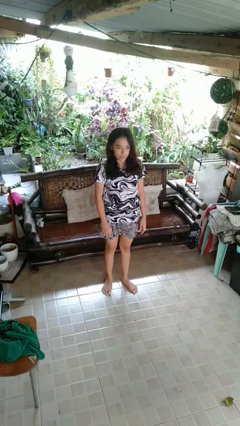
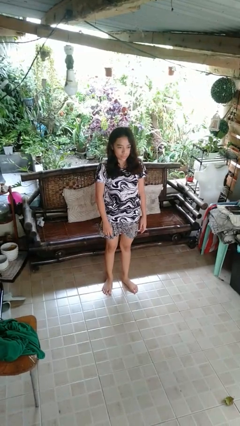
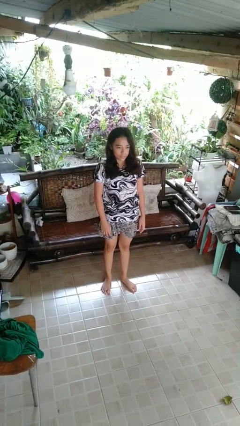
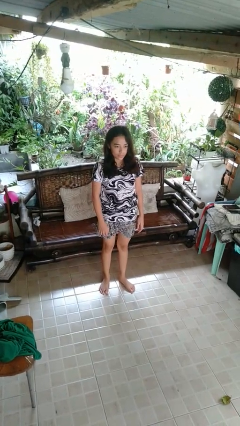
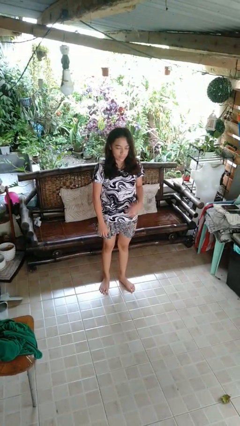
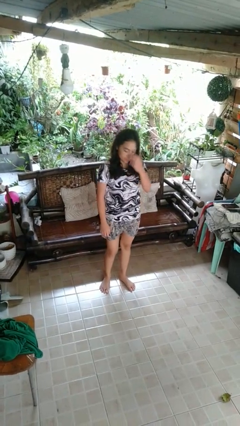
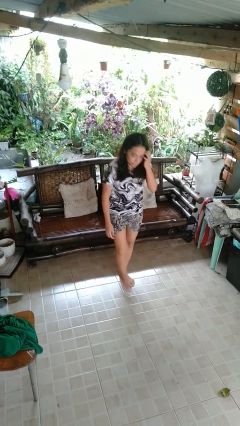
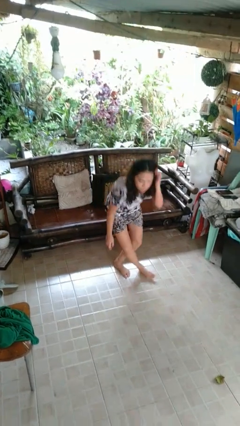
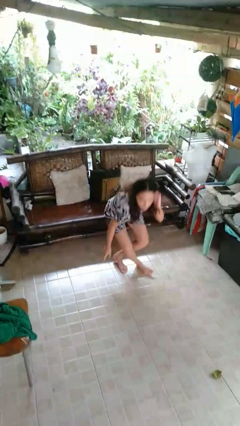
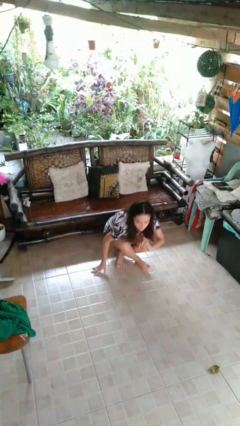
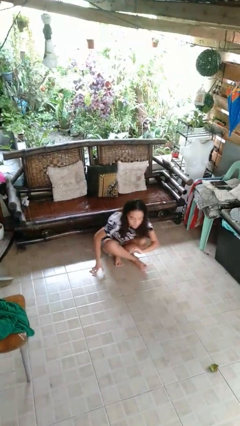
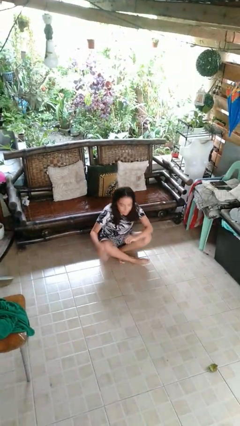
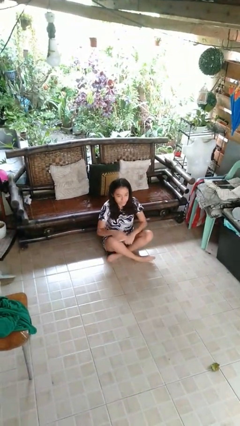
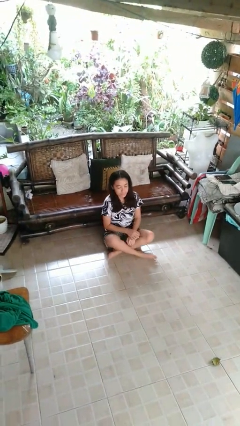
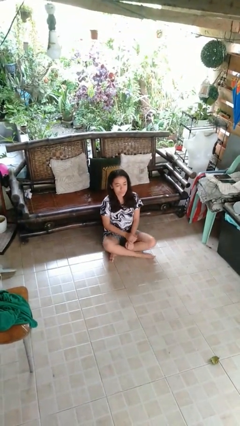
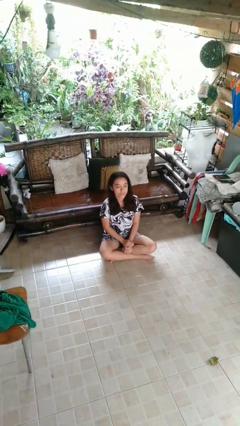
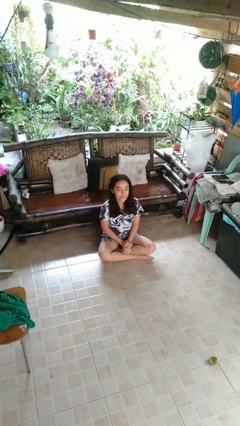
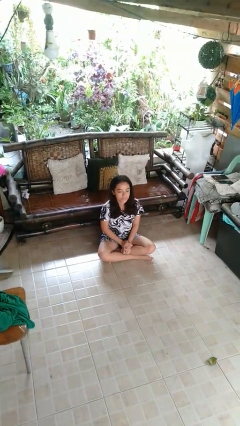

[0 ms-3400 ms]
person sits crisscross

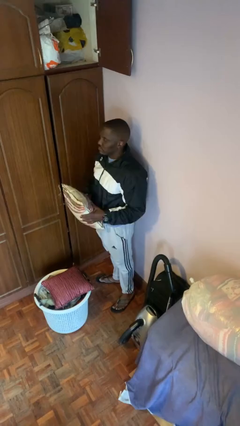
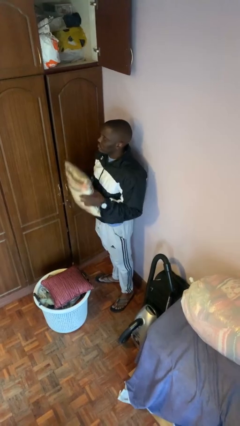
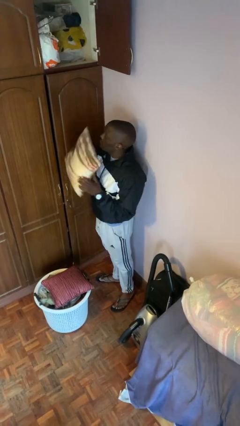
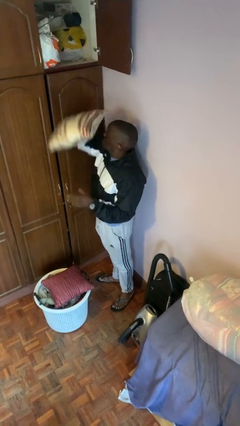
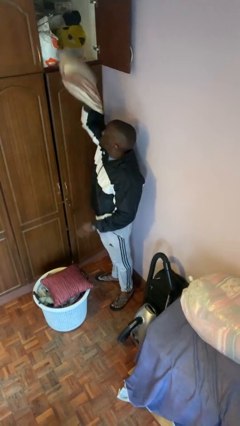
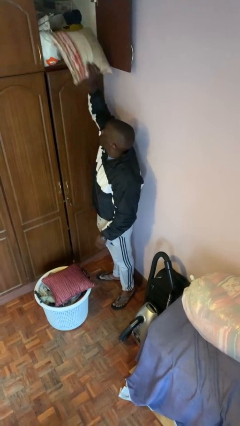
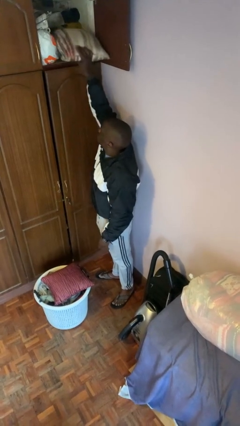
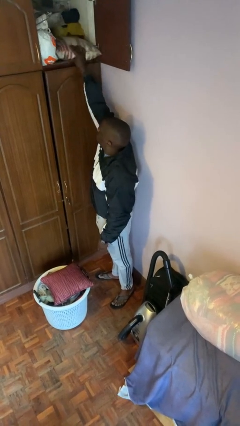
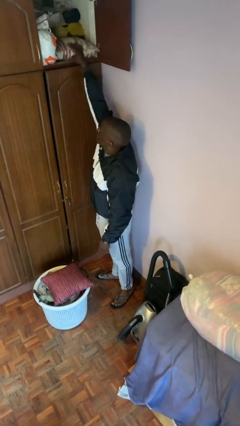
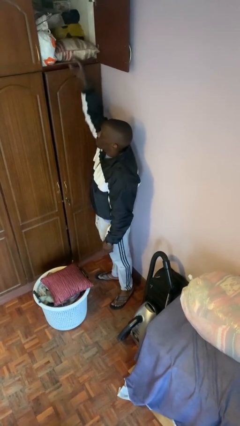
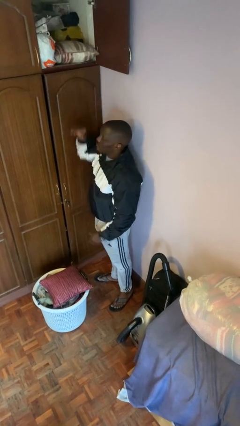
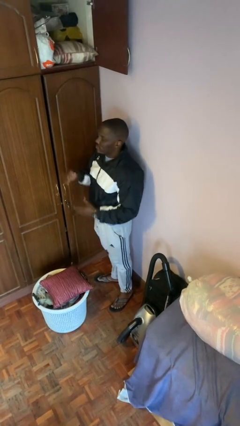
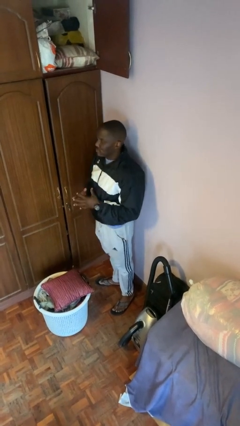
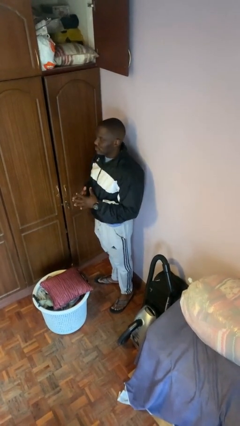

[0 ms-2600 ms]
person puts down object on shelf

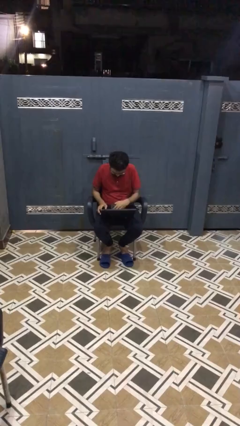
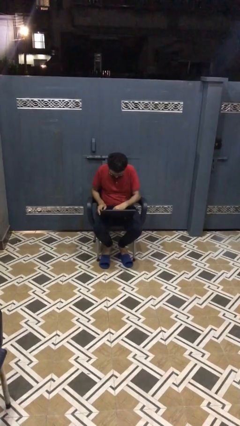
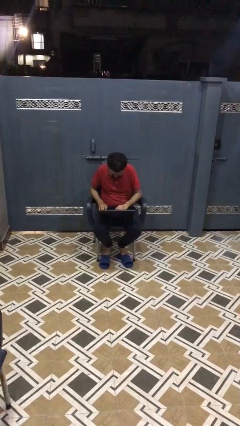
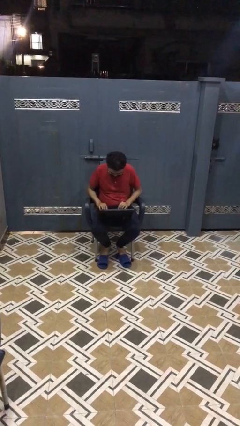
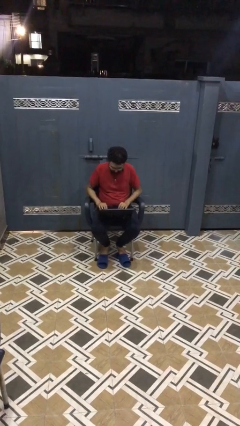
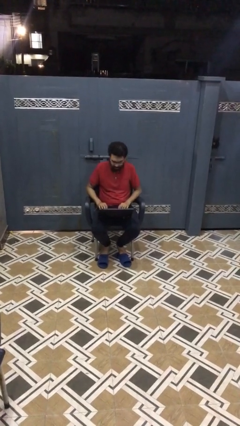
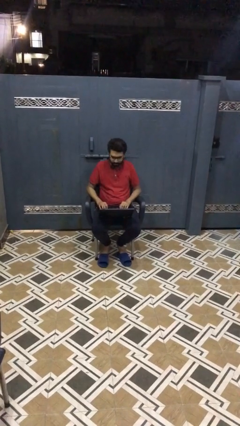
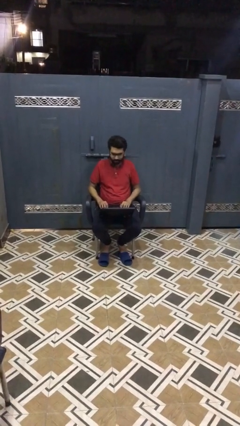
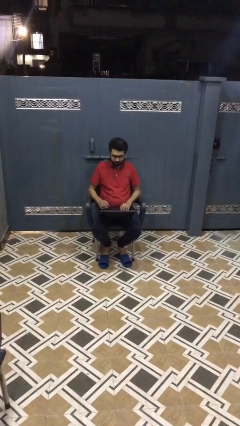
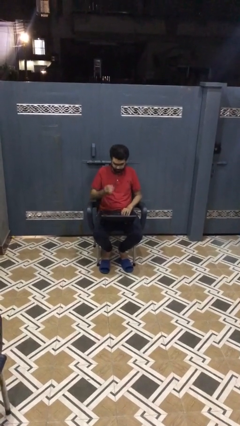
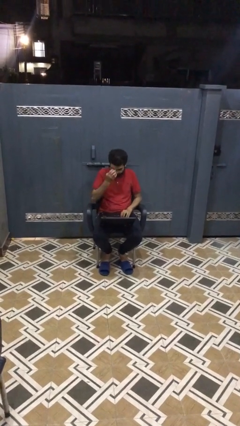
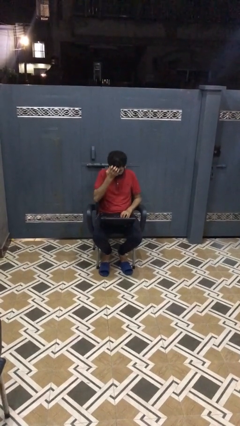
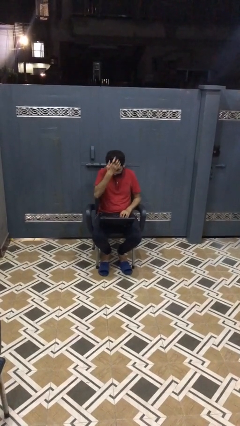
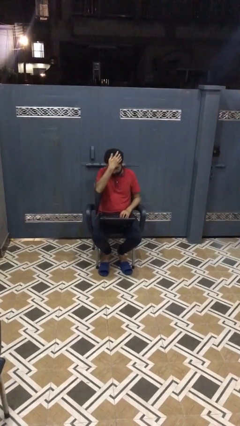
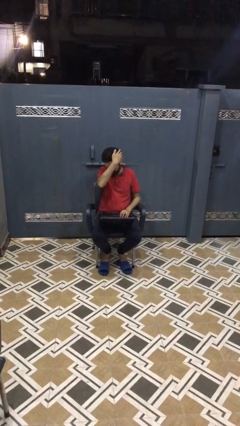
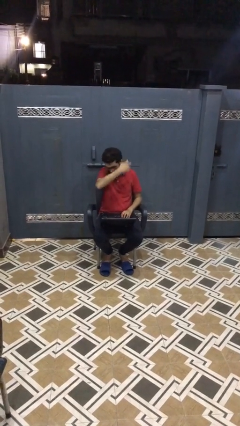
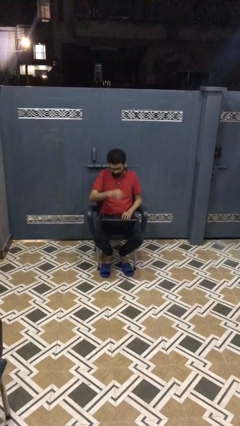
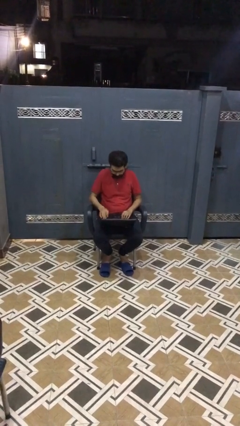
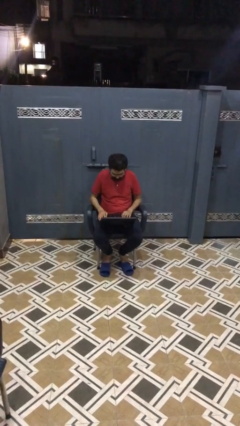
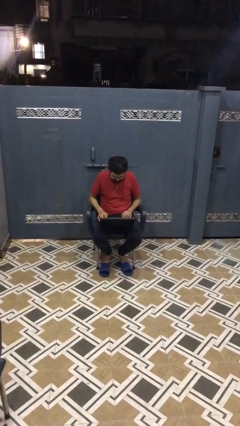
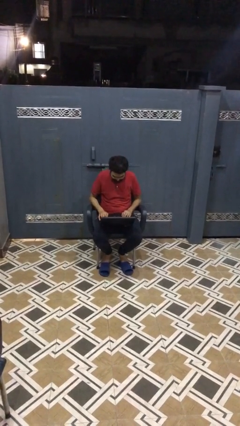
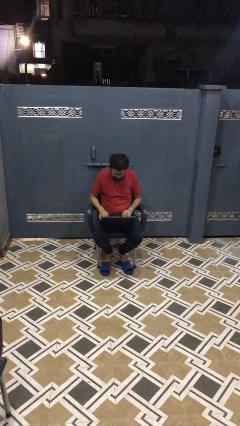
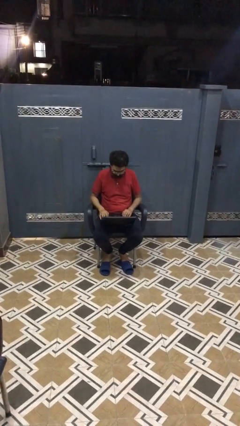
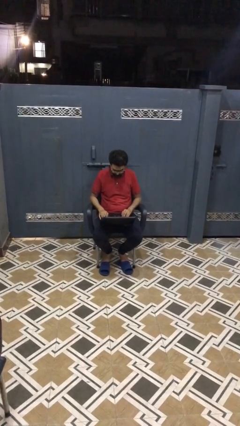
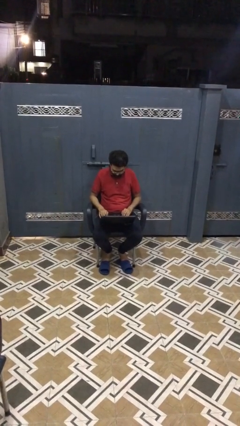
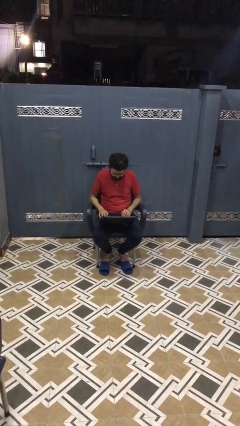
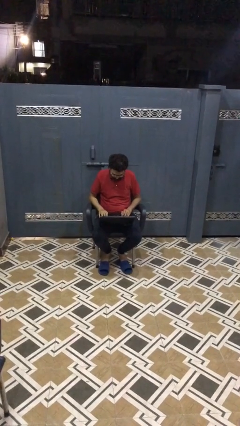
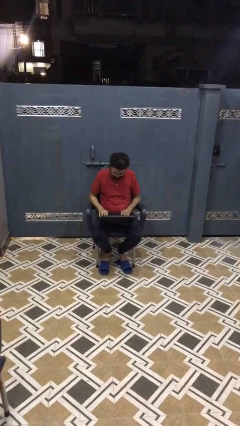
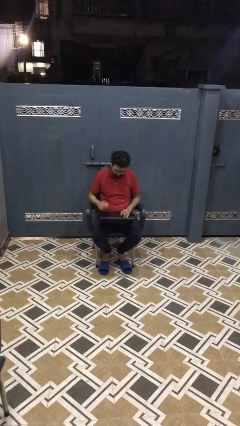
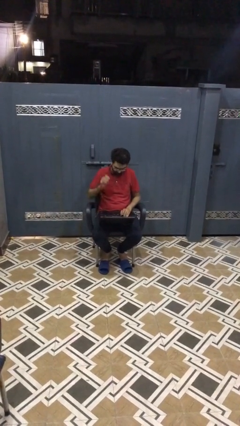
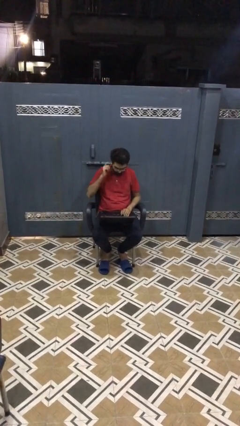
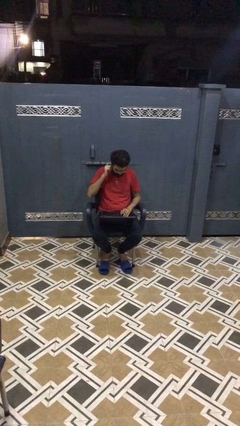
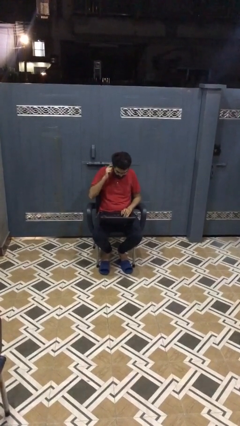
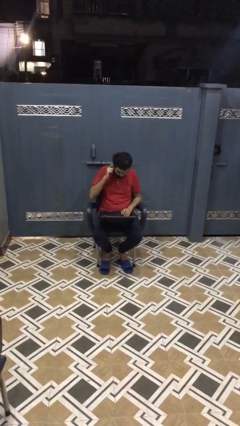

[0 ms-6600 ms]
person interacts with laptop

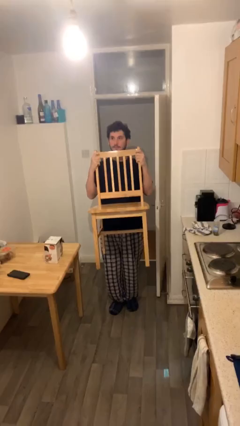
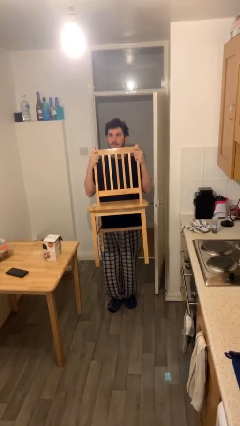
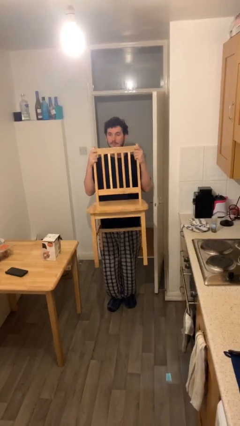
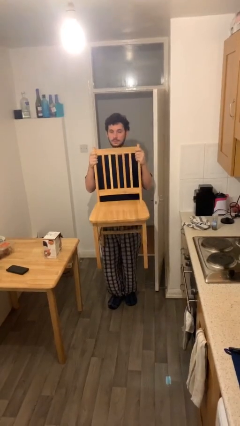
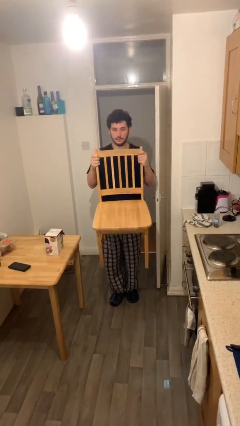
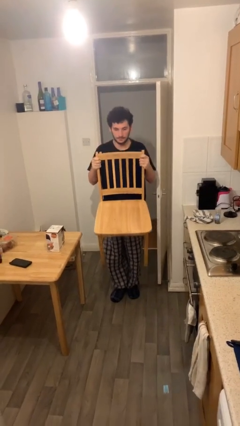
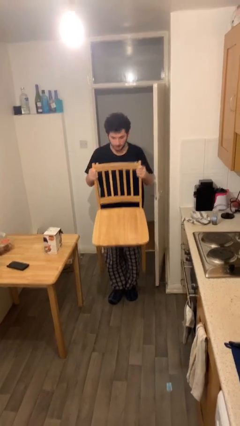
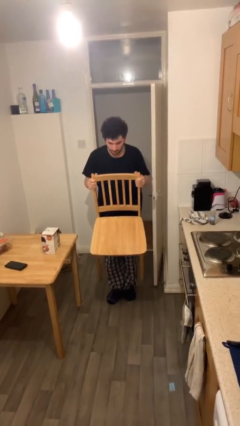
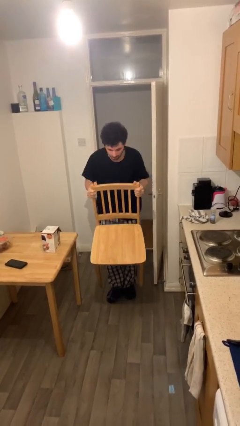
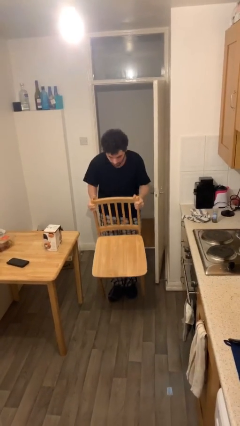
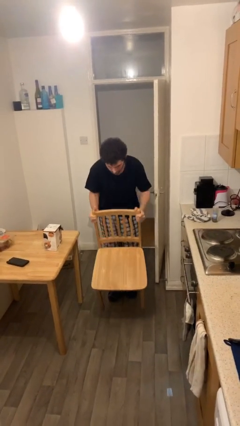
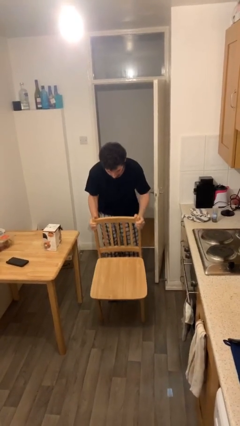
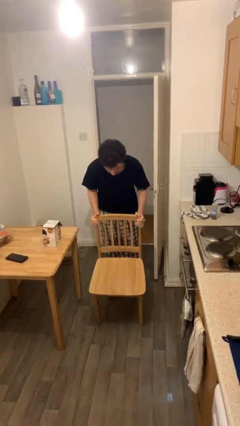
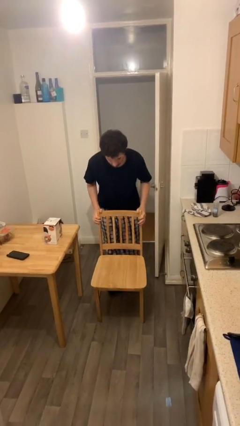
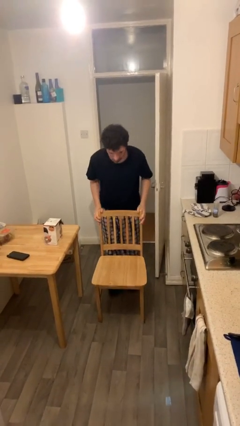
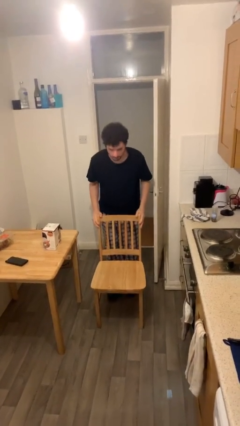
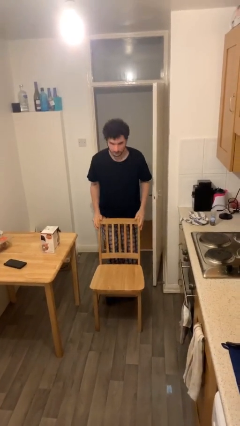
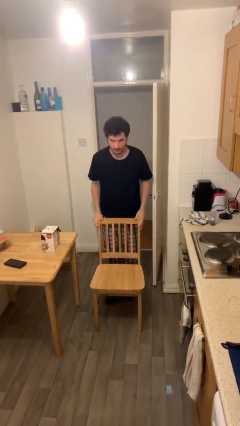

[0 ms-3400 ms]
person puts down object on floor

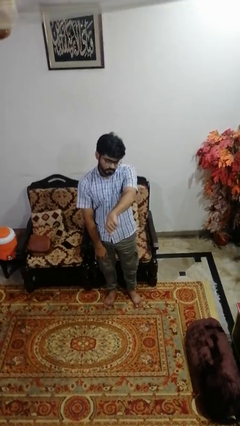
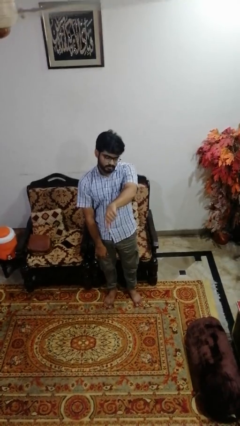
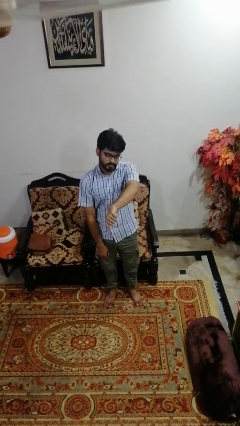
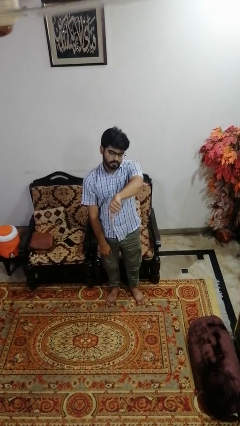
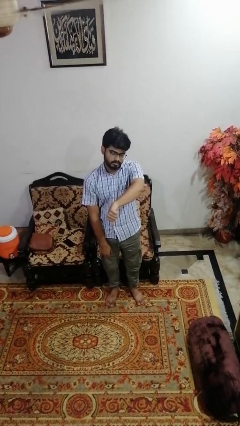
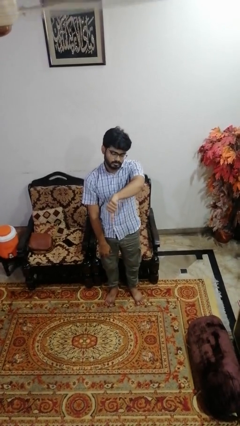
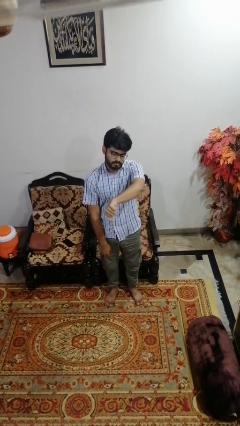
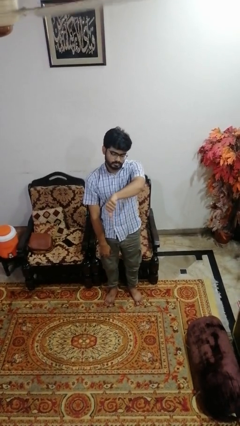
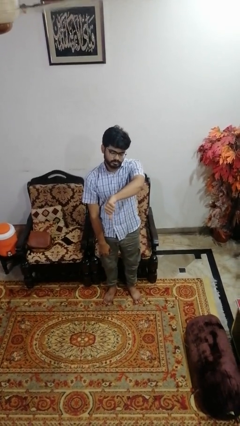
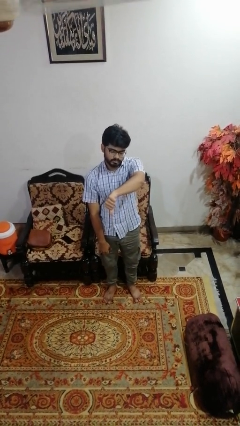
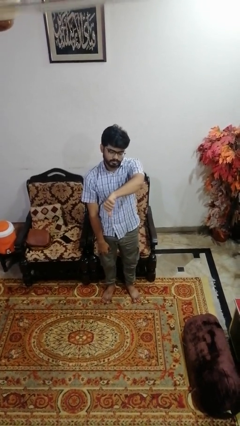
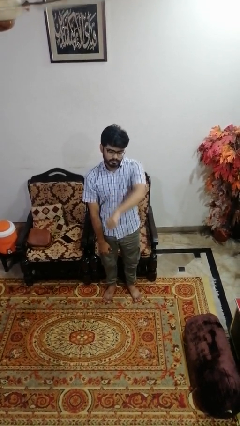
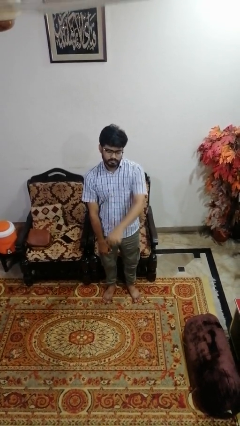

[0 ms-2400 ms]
person gestures thumbs down
